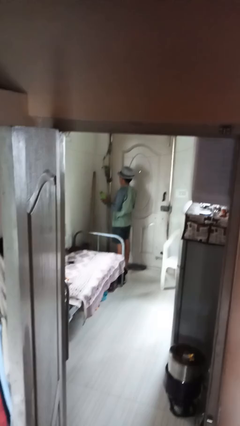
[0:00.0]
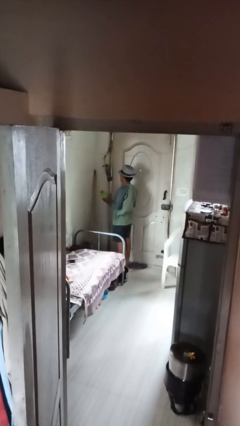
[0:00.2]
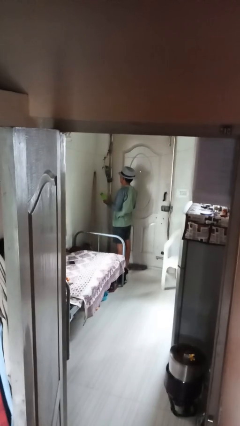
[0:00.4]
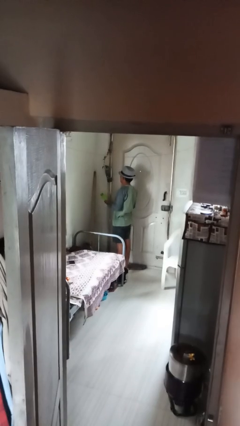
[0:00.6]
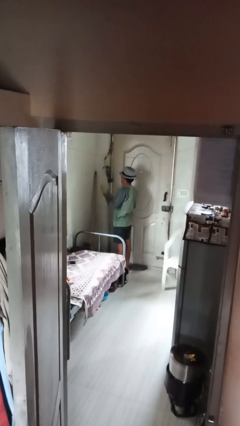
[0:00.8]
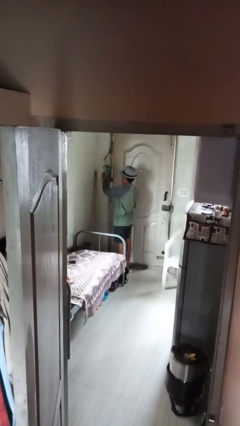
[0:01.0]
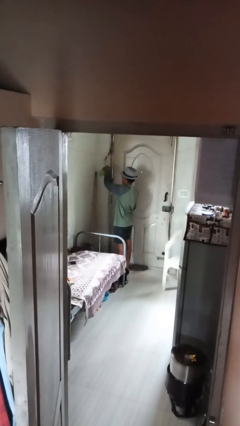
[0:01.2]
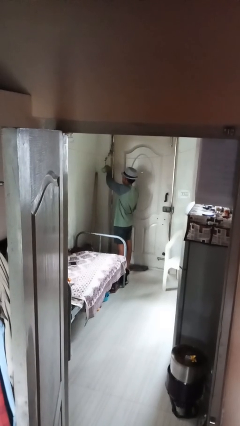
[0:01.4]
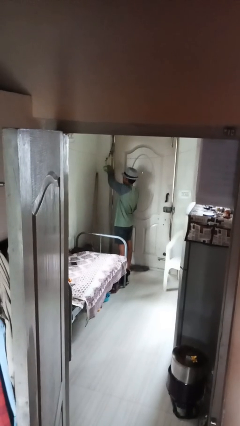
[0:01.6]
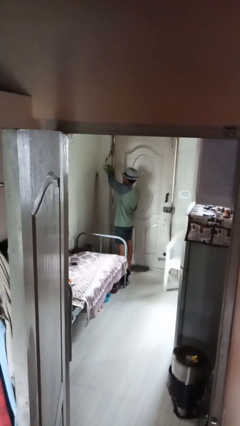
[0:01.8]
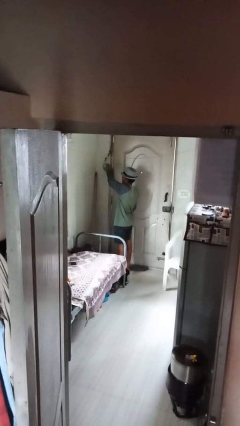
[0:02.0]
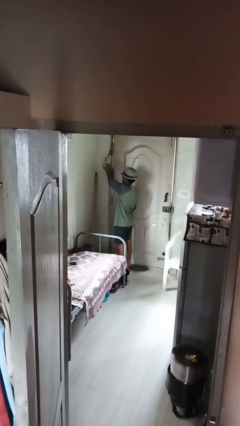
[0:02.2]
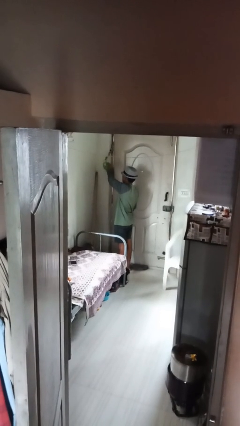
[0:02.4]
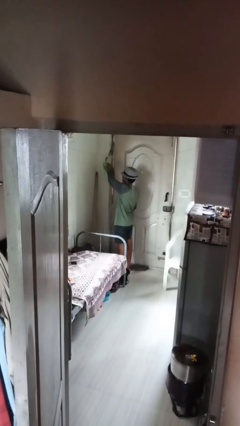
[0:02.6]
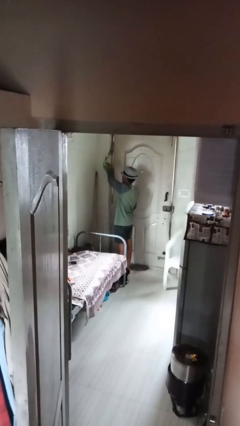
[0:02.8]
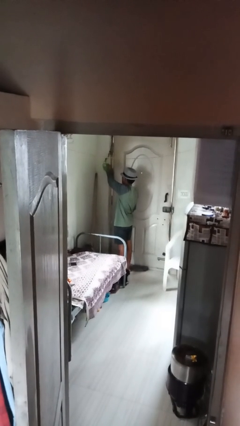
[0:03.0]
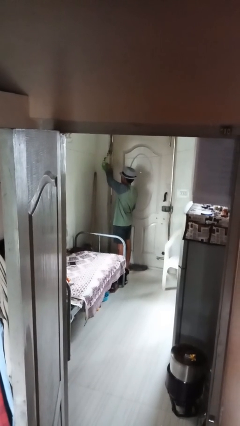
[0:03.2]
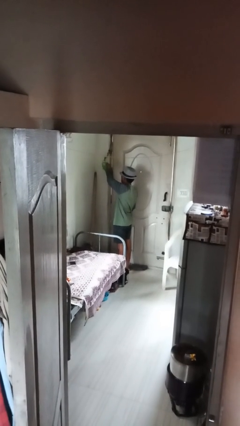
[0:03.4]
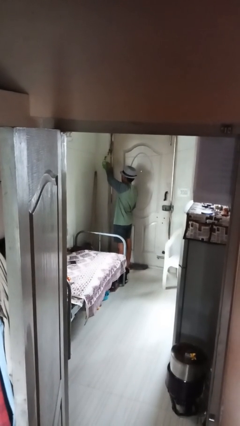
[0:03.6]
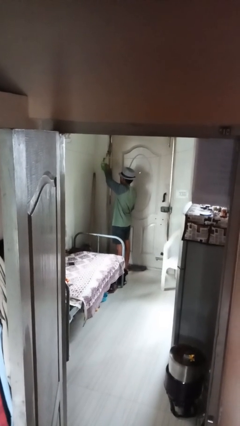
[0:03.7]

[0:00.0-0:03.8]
person waters houseplant

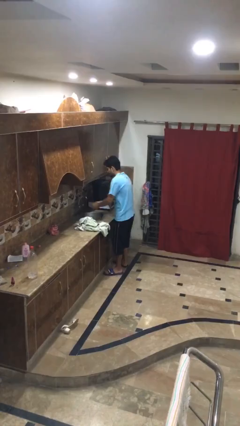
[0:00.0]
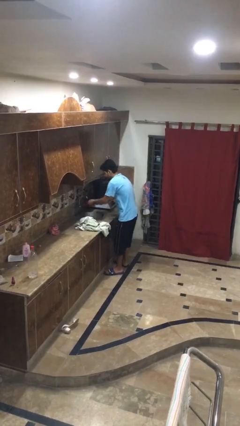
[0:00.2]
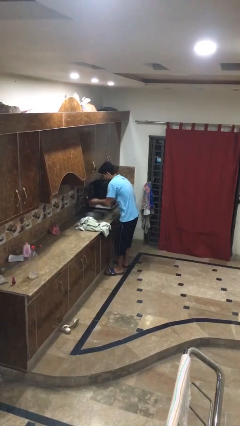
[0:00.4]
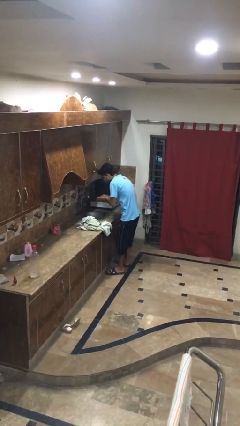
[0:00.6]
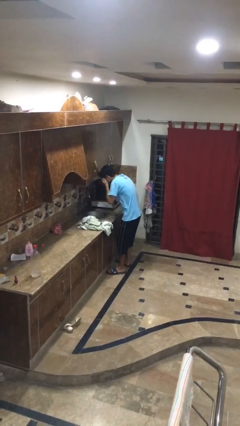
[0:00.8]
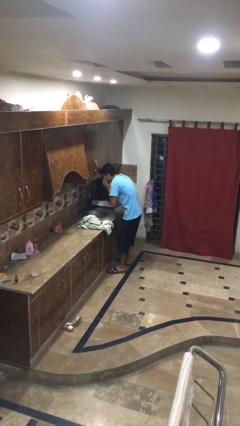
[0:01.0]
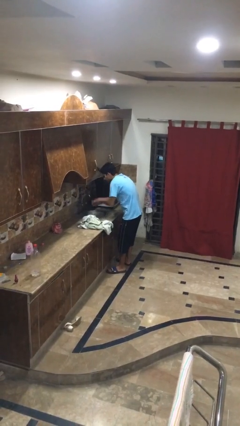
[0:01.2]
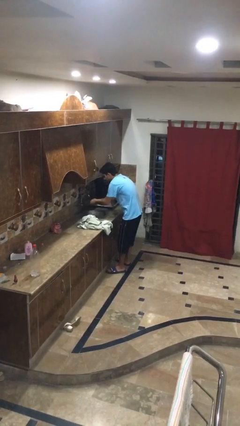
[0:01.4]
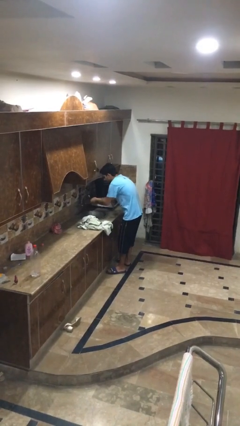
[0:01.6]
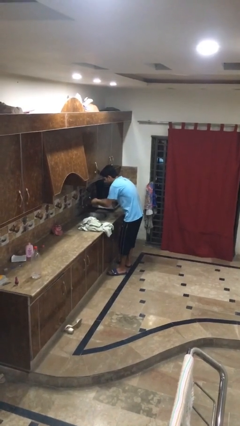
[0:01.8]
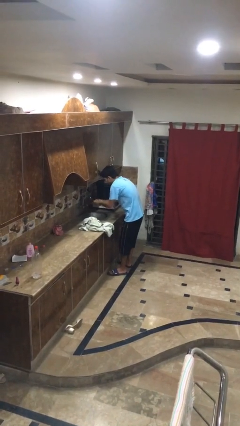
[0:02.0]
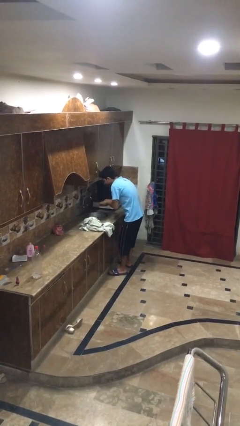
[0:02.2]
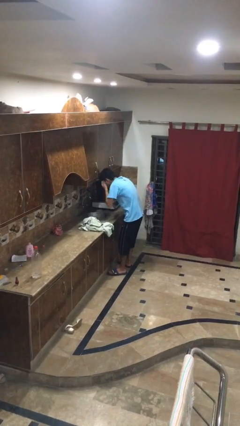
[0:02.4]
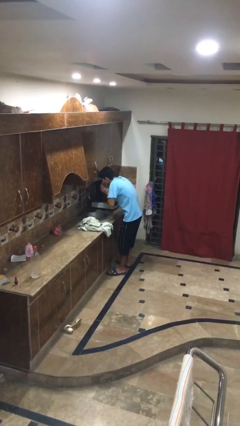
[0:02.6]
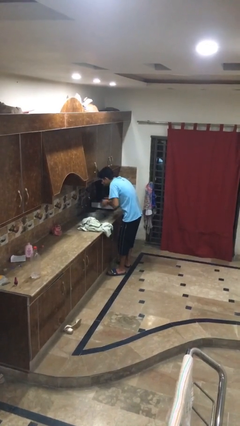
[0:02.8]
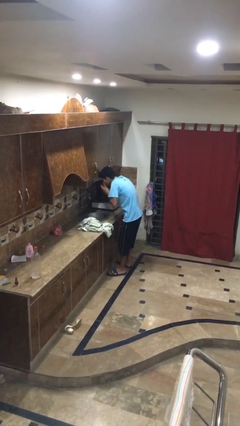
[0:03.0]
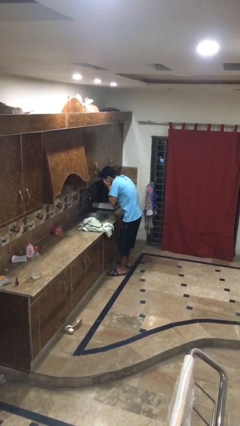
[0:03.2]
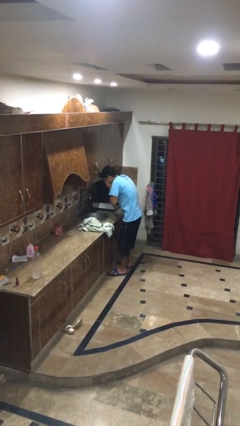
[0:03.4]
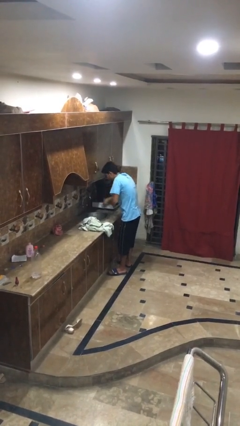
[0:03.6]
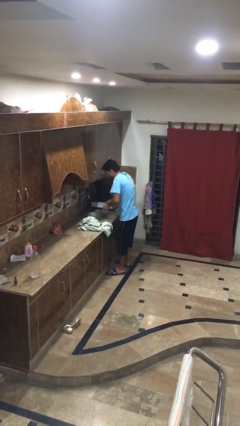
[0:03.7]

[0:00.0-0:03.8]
person washes face

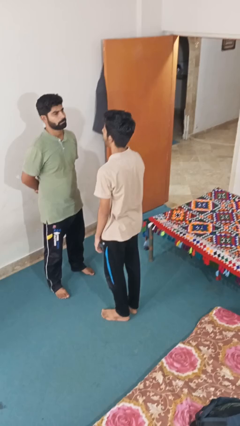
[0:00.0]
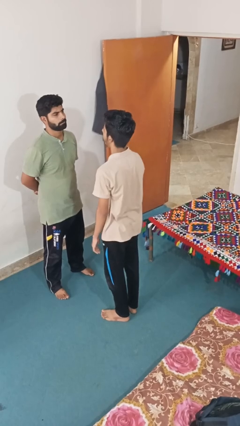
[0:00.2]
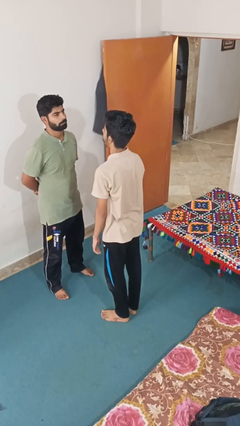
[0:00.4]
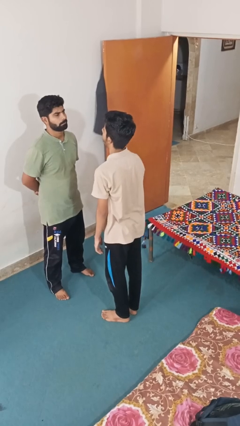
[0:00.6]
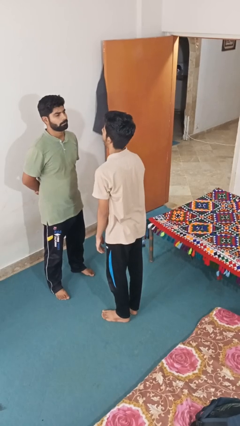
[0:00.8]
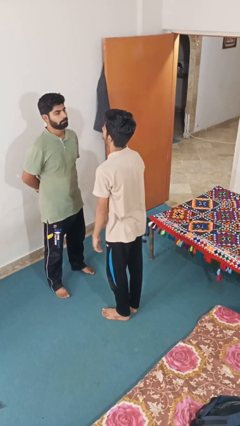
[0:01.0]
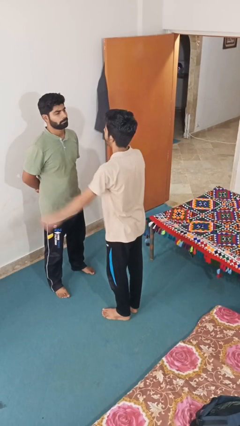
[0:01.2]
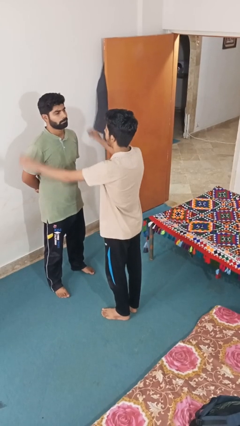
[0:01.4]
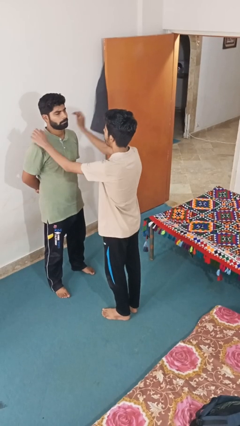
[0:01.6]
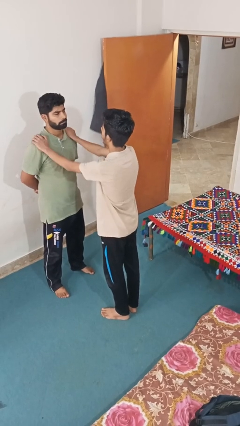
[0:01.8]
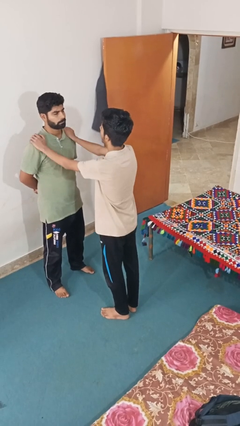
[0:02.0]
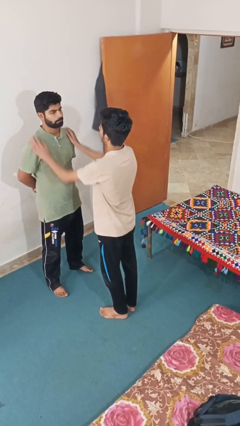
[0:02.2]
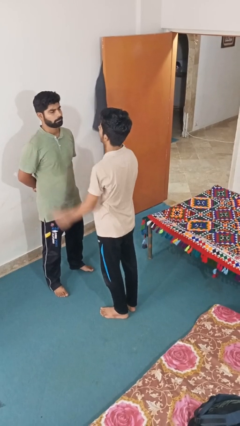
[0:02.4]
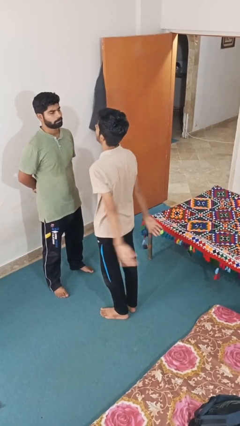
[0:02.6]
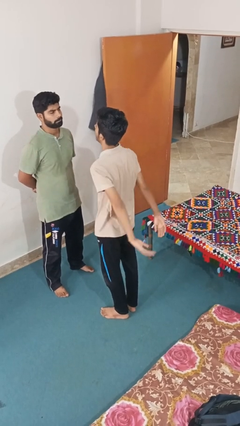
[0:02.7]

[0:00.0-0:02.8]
person pounds shoulders of person

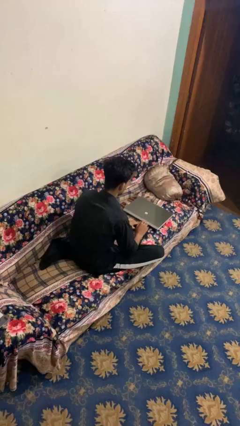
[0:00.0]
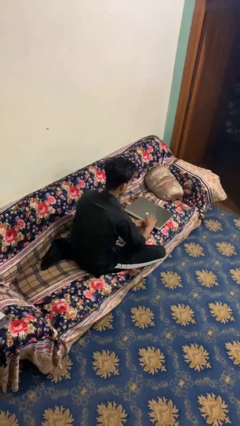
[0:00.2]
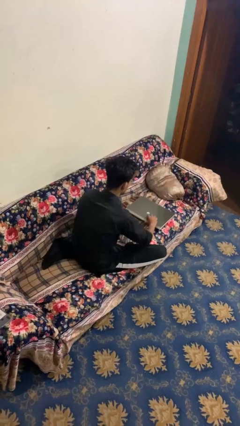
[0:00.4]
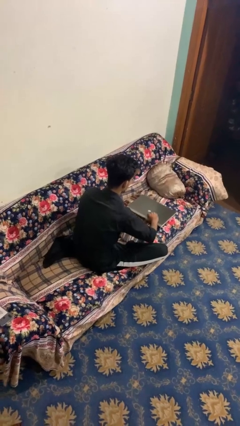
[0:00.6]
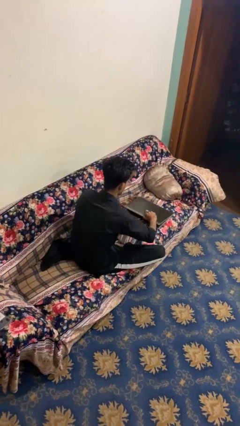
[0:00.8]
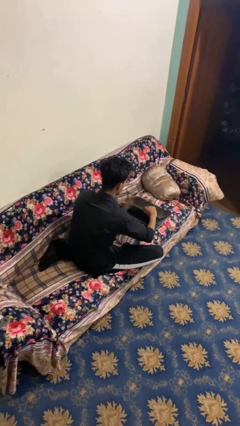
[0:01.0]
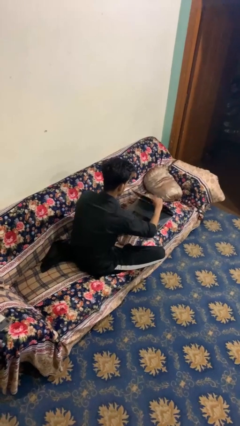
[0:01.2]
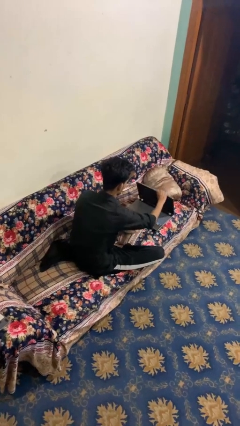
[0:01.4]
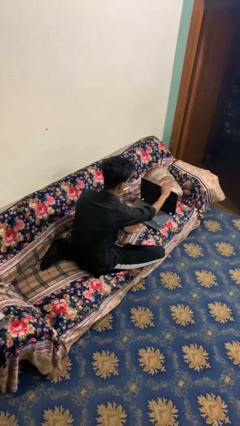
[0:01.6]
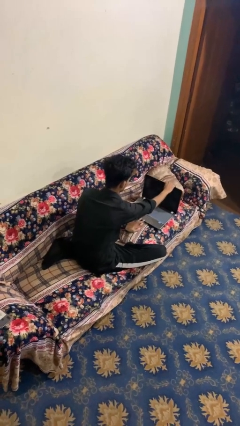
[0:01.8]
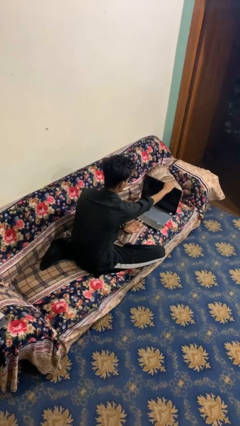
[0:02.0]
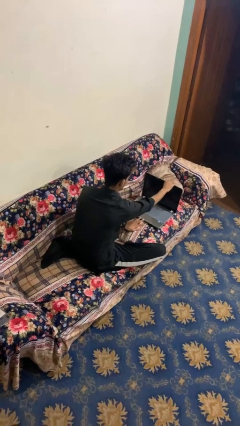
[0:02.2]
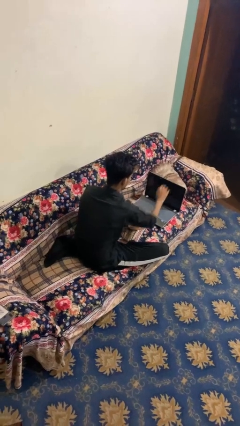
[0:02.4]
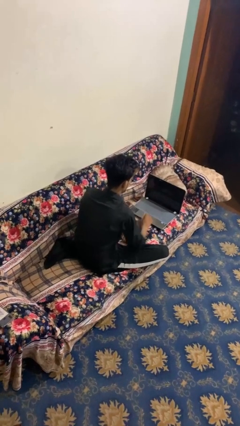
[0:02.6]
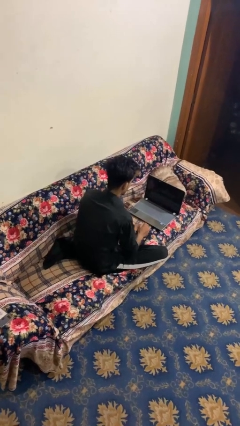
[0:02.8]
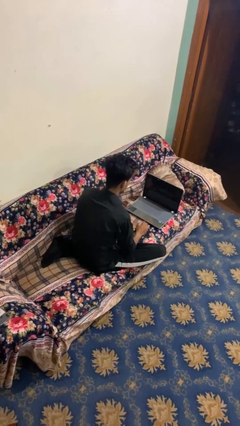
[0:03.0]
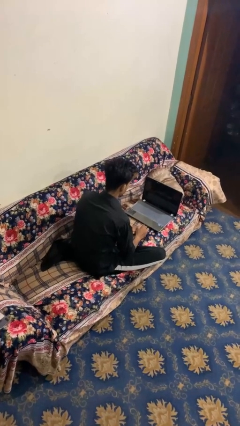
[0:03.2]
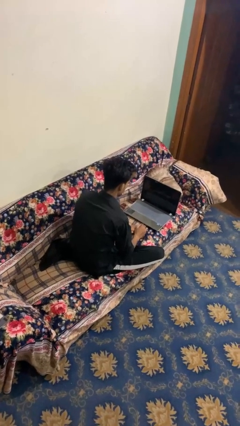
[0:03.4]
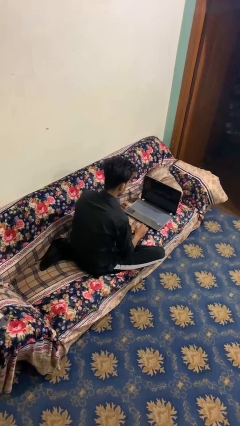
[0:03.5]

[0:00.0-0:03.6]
person opens laptop

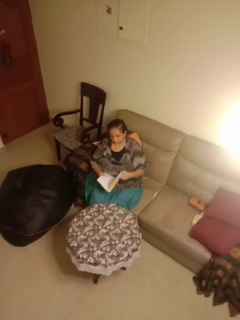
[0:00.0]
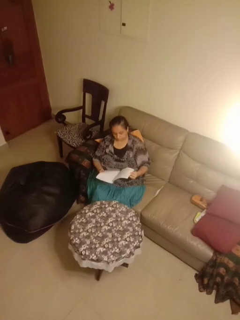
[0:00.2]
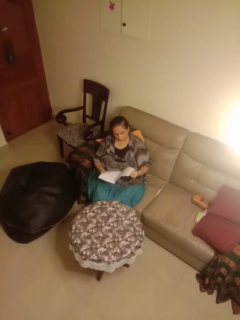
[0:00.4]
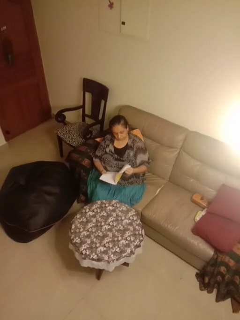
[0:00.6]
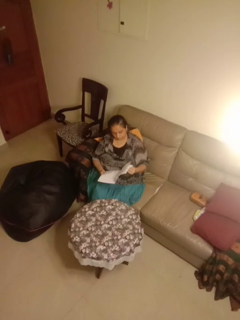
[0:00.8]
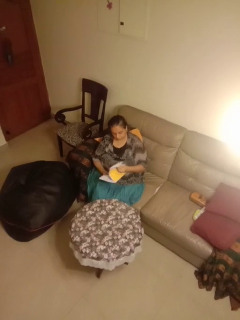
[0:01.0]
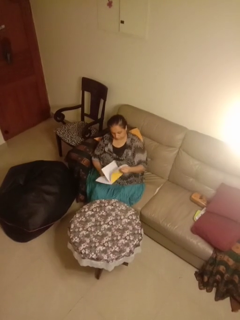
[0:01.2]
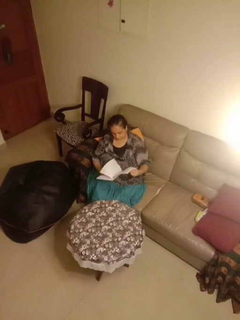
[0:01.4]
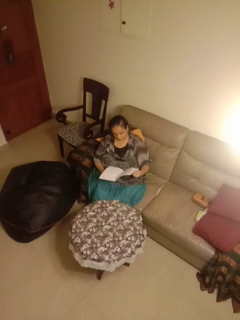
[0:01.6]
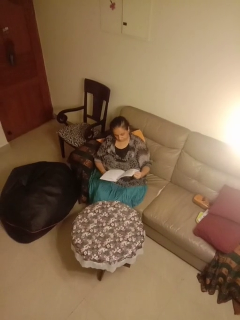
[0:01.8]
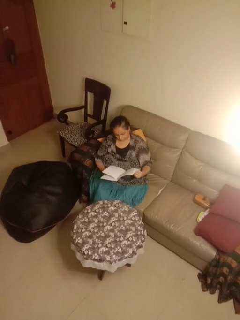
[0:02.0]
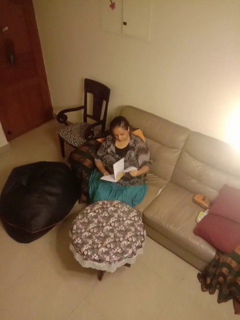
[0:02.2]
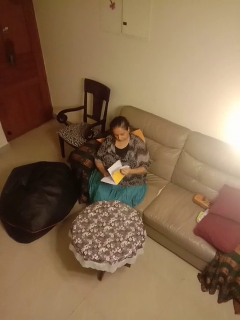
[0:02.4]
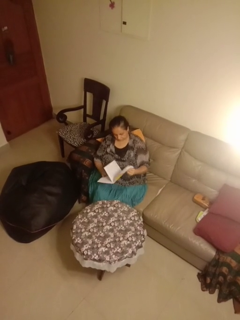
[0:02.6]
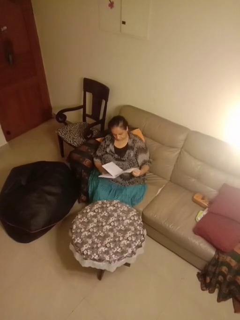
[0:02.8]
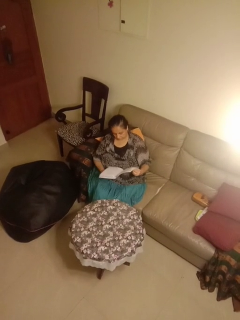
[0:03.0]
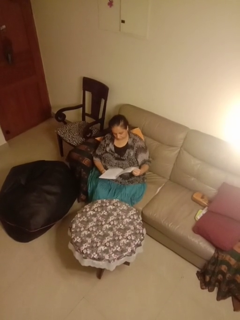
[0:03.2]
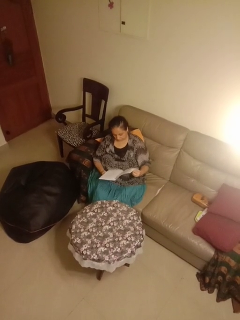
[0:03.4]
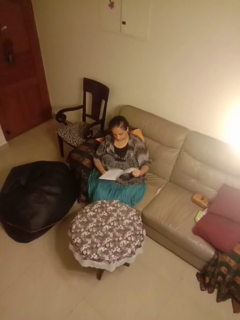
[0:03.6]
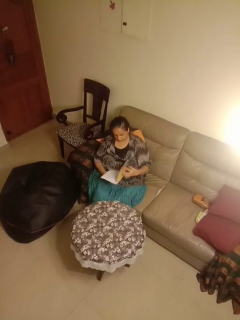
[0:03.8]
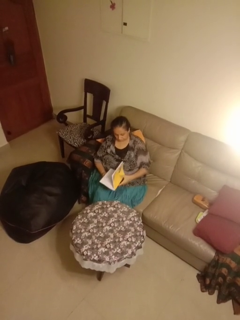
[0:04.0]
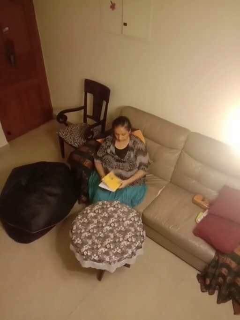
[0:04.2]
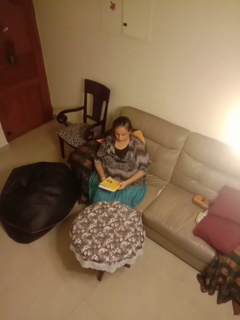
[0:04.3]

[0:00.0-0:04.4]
person reads magazine

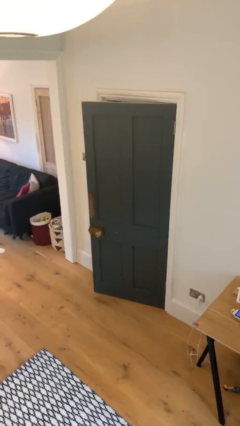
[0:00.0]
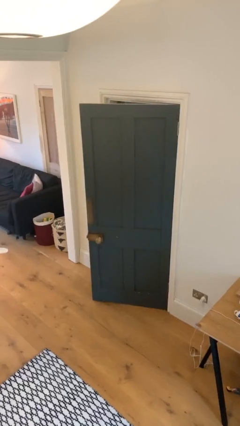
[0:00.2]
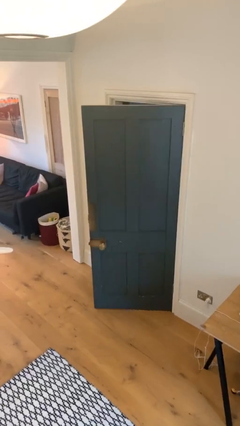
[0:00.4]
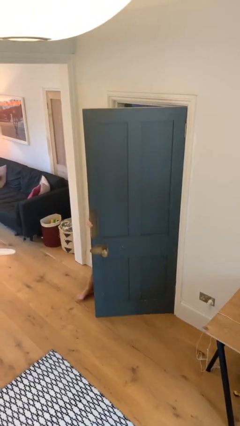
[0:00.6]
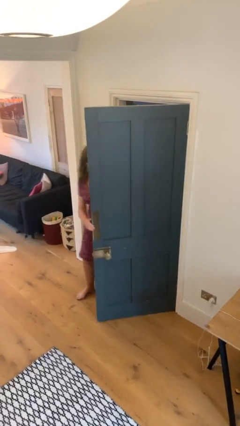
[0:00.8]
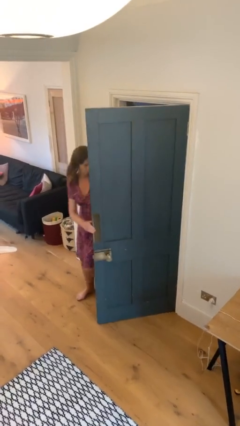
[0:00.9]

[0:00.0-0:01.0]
person opens facility door
